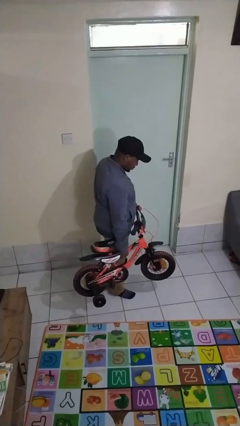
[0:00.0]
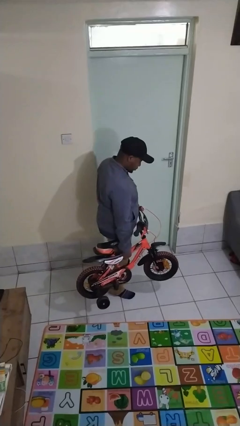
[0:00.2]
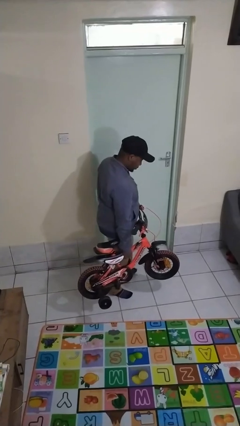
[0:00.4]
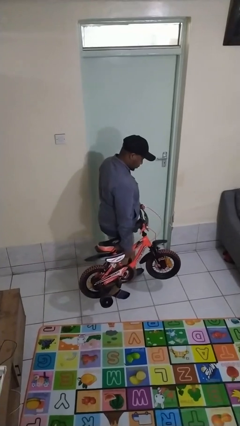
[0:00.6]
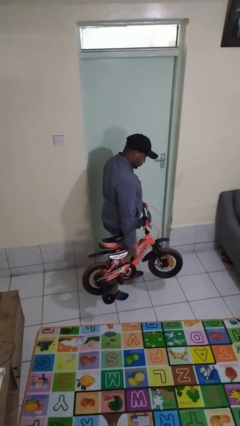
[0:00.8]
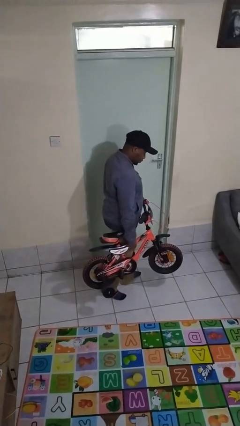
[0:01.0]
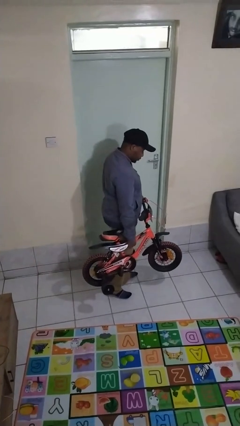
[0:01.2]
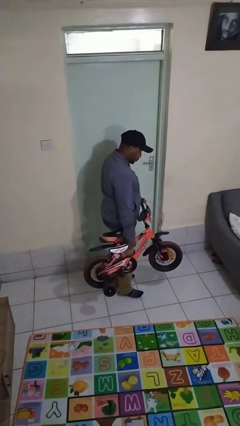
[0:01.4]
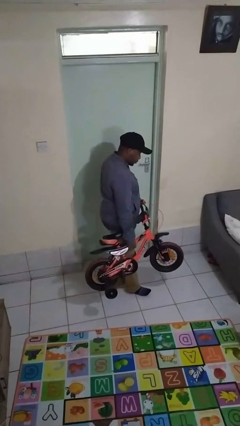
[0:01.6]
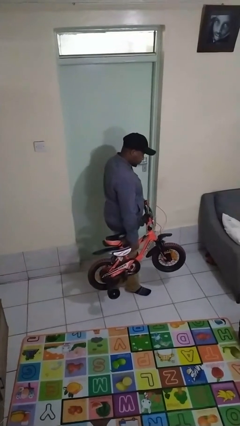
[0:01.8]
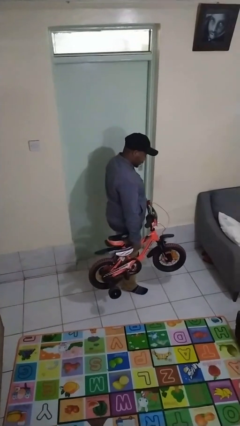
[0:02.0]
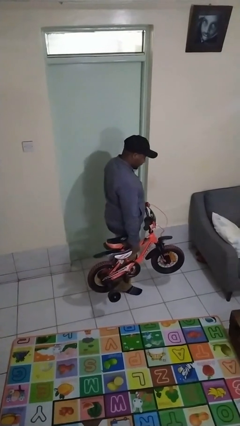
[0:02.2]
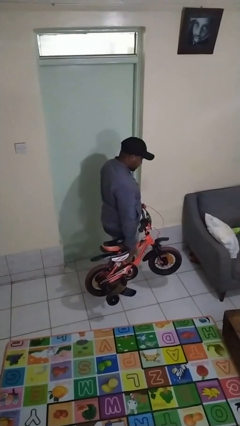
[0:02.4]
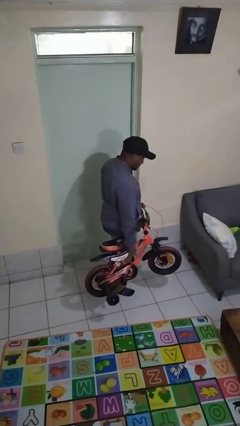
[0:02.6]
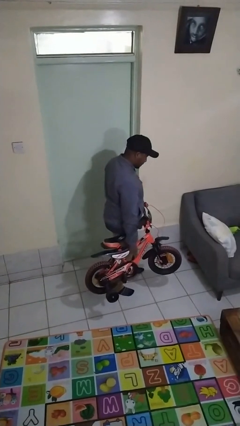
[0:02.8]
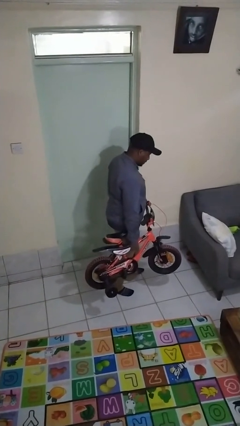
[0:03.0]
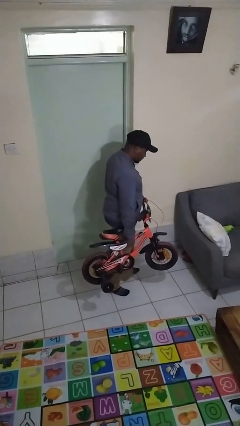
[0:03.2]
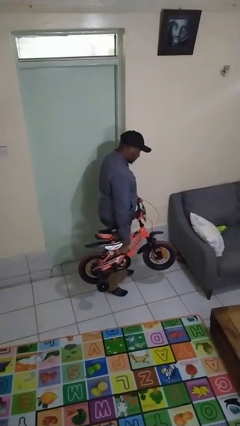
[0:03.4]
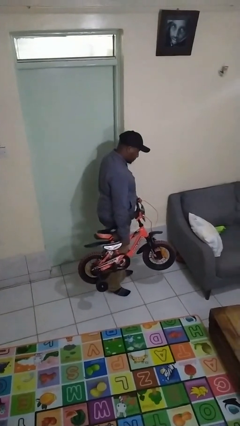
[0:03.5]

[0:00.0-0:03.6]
person carries bicycle

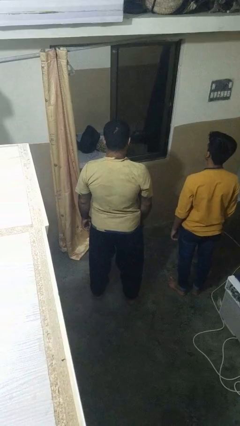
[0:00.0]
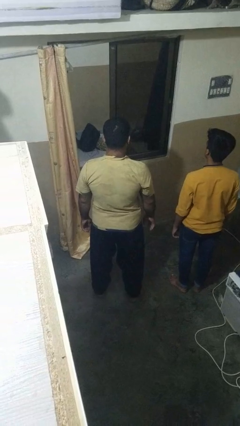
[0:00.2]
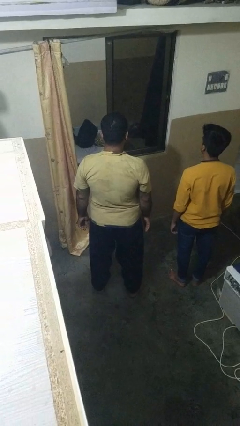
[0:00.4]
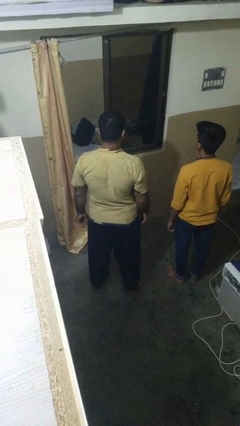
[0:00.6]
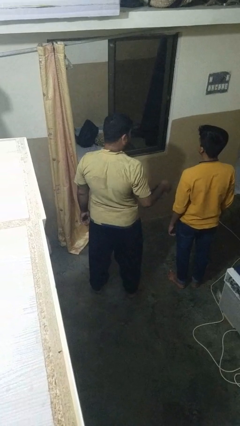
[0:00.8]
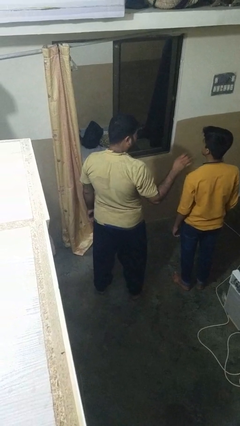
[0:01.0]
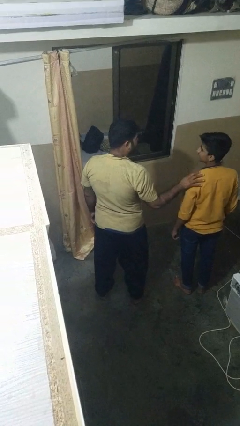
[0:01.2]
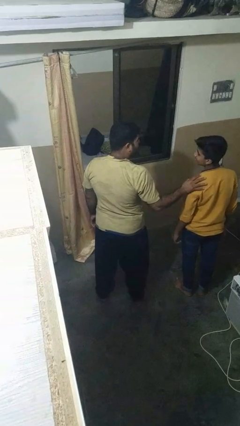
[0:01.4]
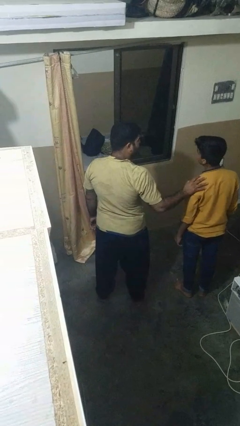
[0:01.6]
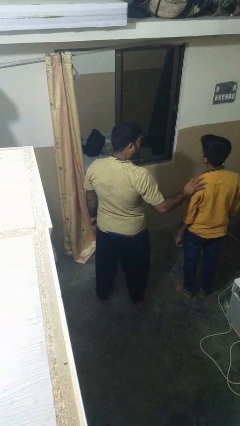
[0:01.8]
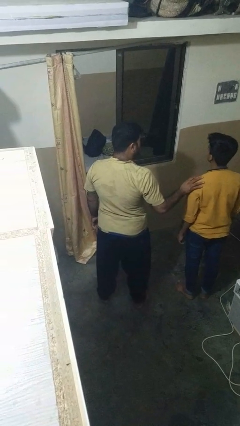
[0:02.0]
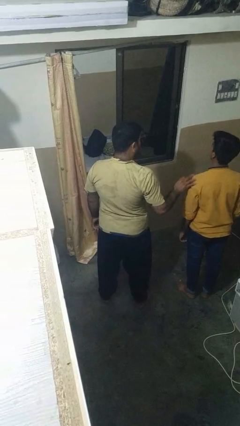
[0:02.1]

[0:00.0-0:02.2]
person pounds shoulders of person

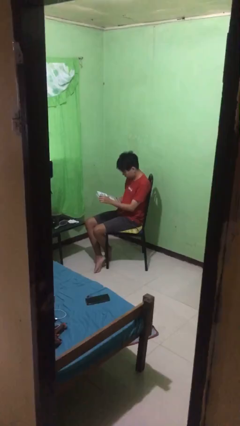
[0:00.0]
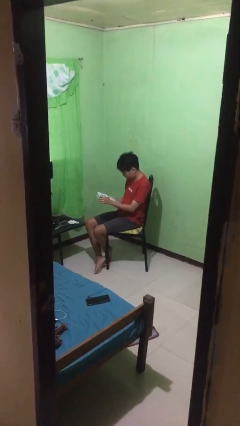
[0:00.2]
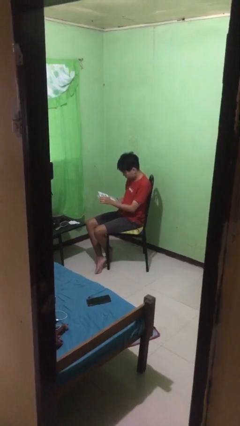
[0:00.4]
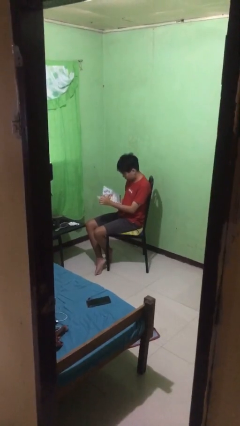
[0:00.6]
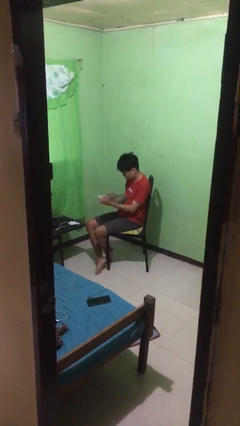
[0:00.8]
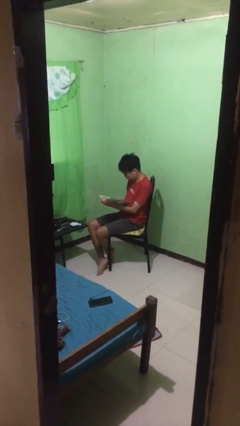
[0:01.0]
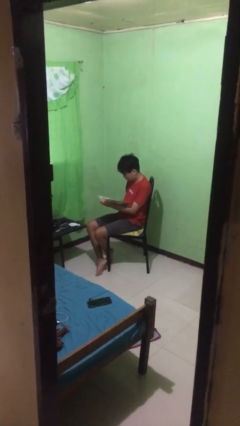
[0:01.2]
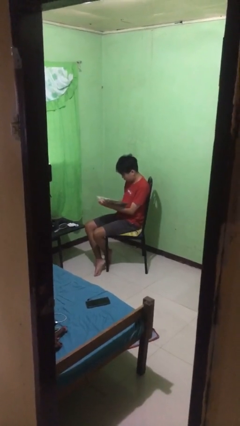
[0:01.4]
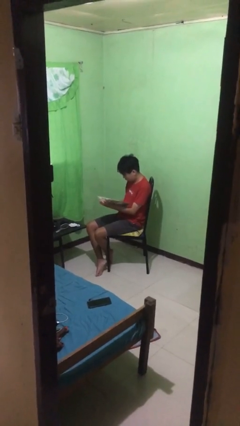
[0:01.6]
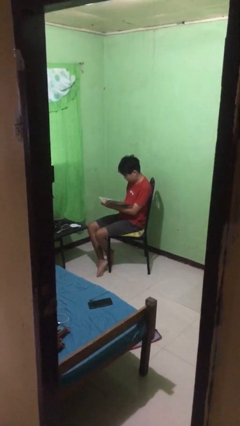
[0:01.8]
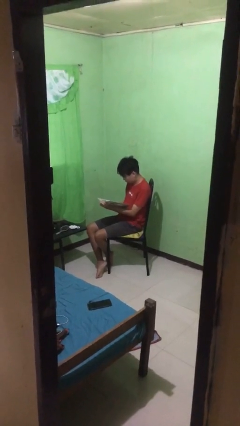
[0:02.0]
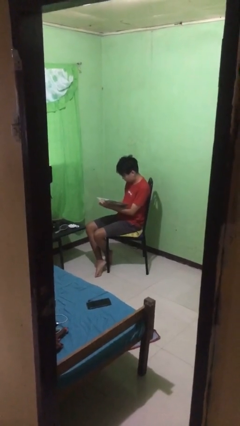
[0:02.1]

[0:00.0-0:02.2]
person reads document

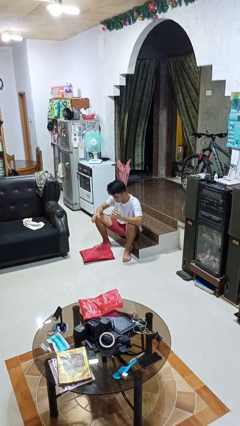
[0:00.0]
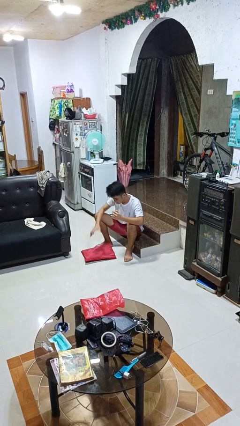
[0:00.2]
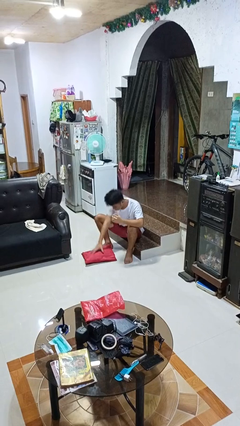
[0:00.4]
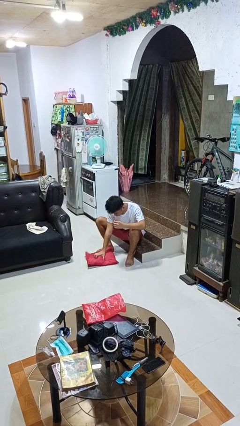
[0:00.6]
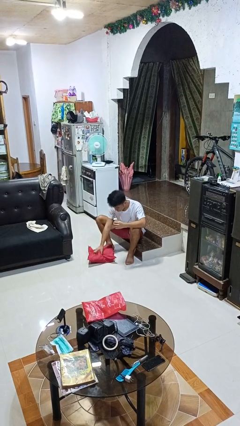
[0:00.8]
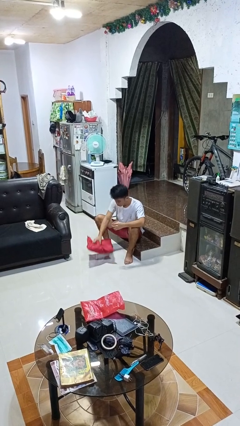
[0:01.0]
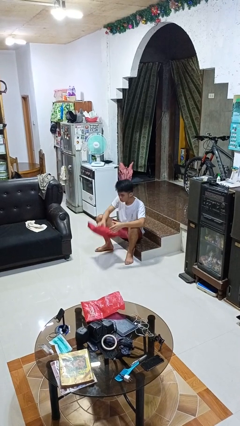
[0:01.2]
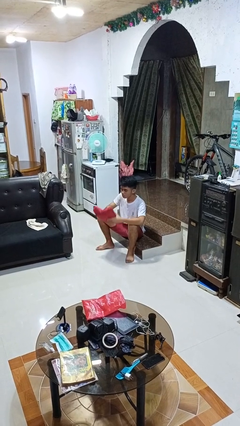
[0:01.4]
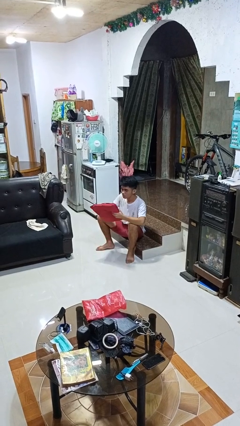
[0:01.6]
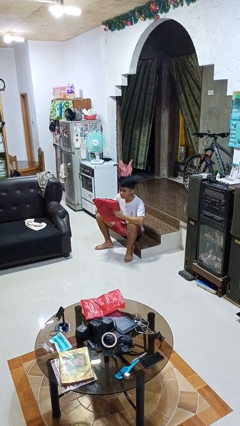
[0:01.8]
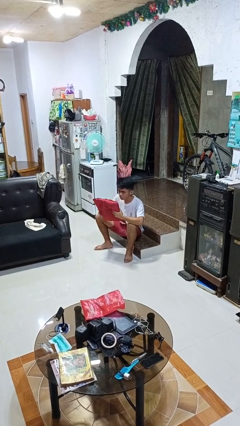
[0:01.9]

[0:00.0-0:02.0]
person picks up object from floor

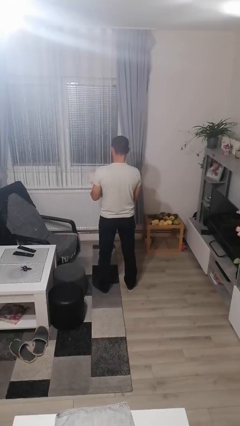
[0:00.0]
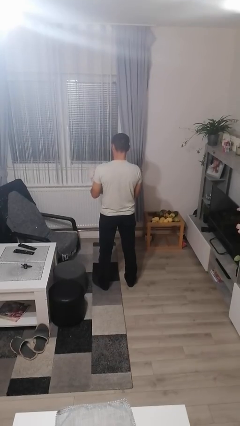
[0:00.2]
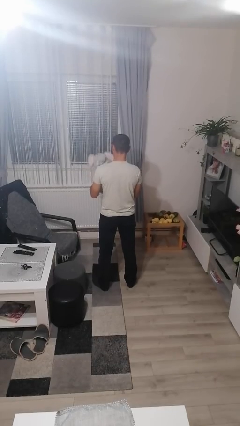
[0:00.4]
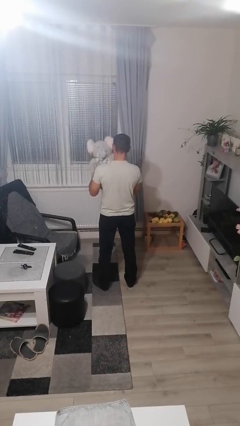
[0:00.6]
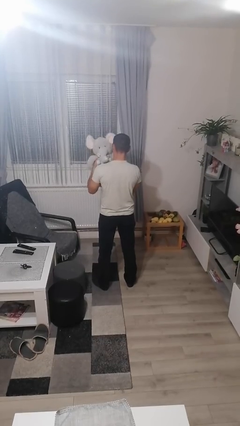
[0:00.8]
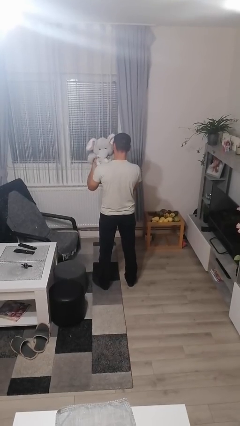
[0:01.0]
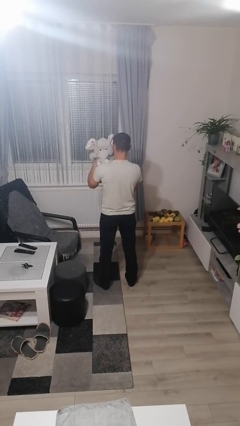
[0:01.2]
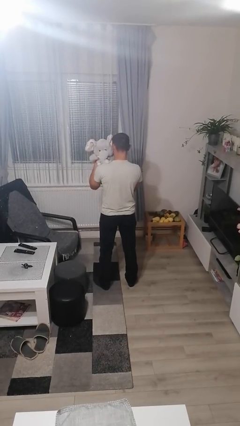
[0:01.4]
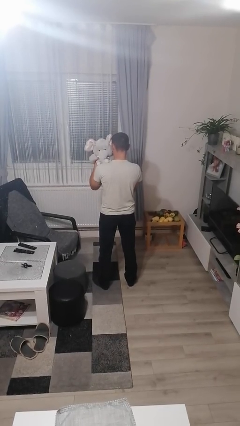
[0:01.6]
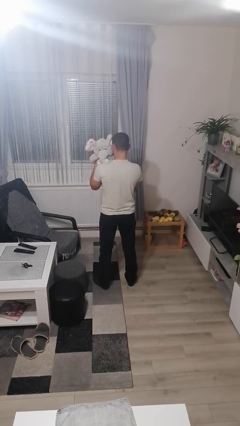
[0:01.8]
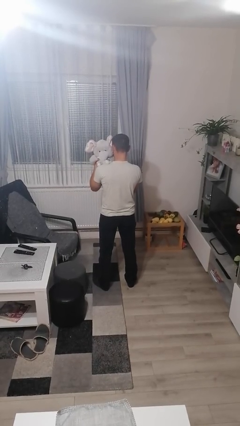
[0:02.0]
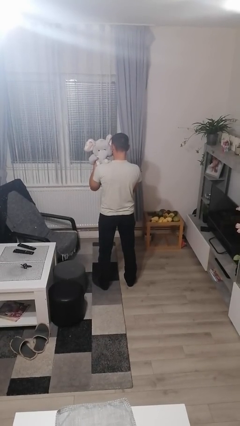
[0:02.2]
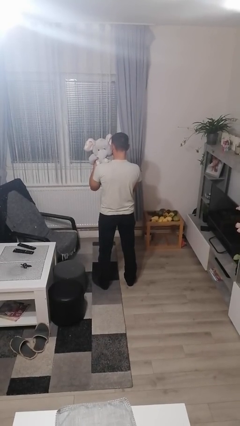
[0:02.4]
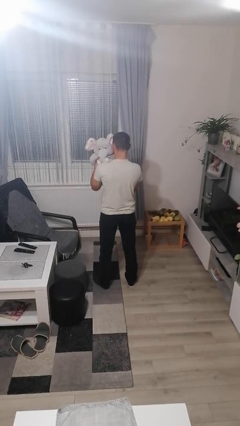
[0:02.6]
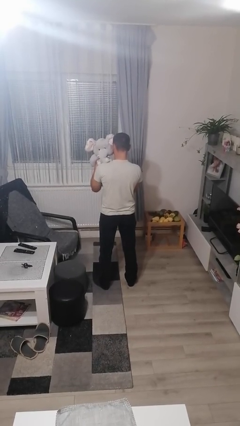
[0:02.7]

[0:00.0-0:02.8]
person hugs stuffed animal

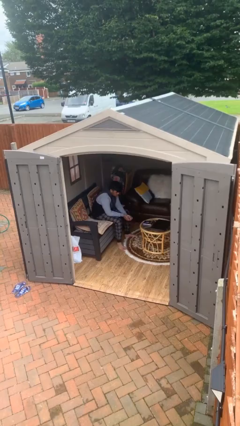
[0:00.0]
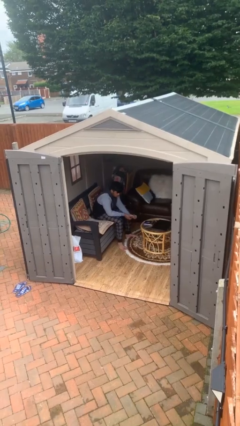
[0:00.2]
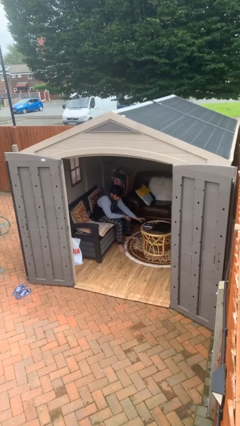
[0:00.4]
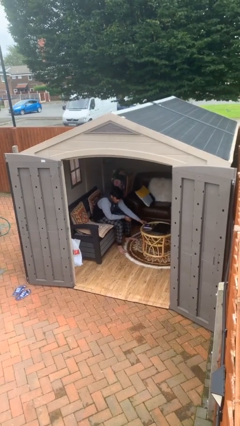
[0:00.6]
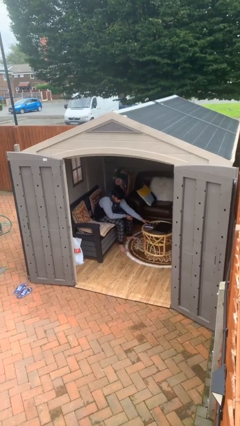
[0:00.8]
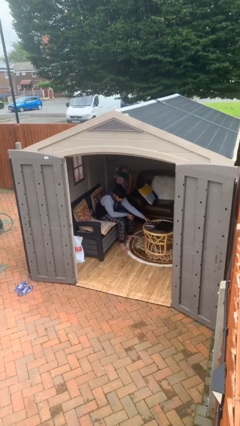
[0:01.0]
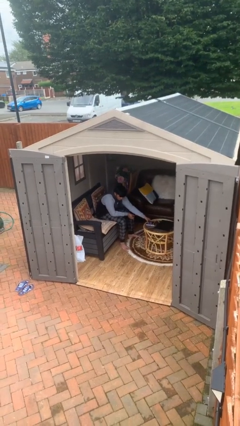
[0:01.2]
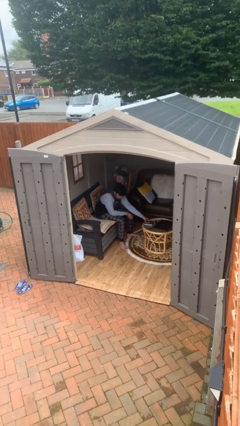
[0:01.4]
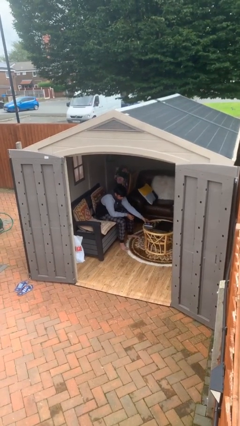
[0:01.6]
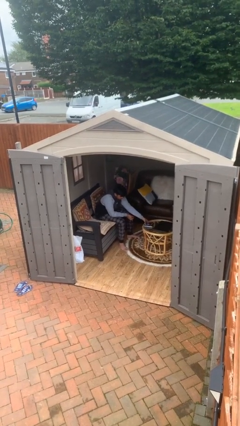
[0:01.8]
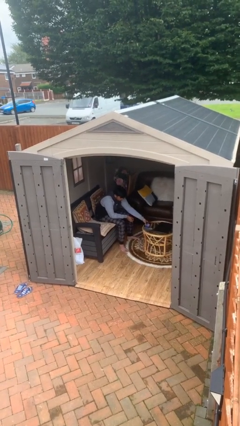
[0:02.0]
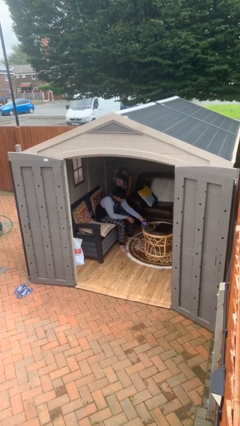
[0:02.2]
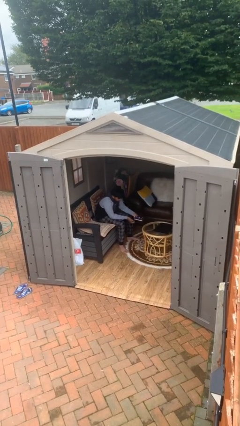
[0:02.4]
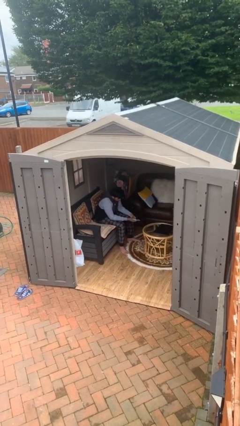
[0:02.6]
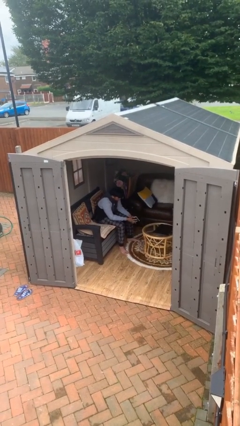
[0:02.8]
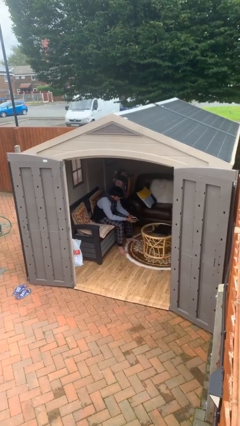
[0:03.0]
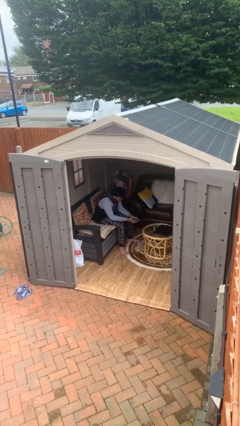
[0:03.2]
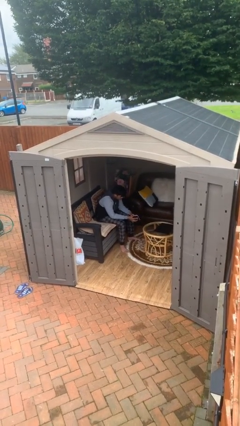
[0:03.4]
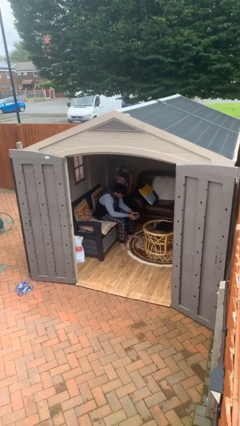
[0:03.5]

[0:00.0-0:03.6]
person picks up object from table

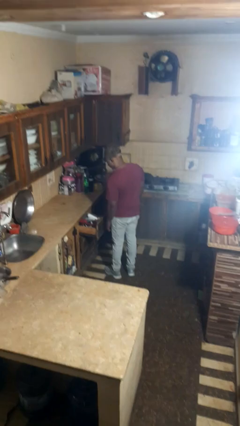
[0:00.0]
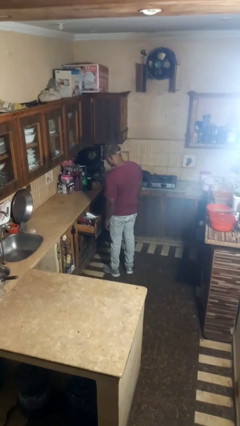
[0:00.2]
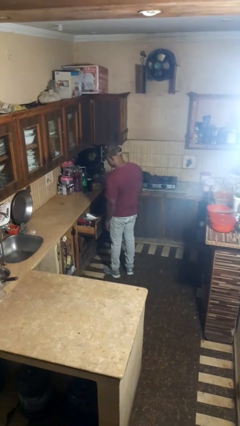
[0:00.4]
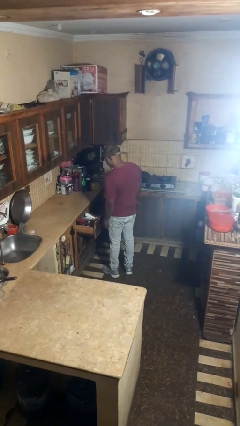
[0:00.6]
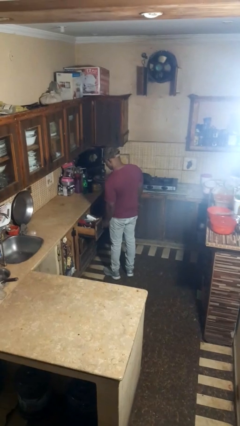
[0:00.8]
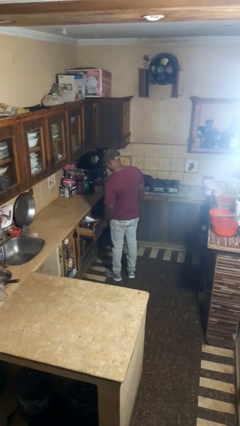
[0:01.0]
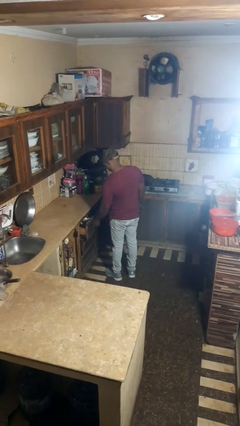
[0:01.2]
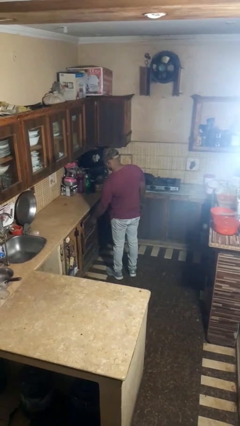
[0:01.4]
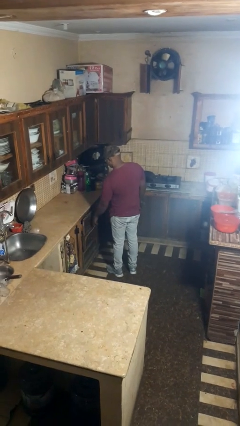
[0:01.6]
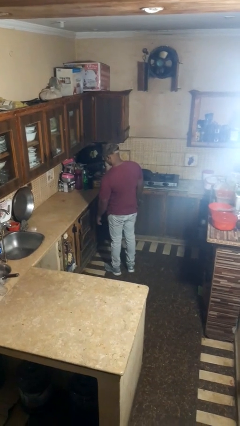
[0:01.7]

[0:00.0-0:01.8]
person closes kitchen drawer
